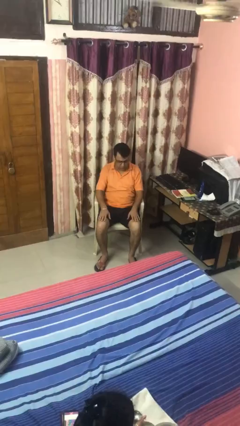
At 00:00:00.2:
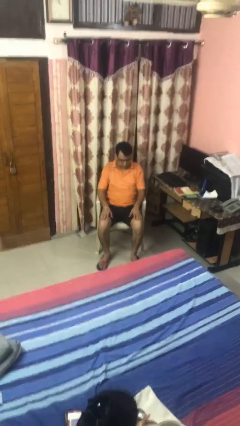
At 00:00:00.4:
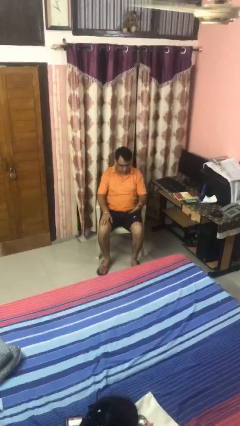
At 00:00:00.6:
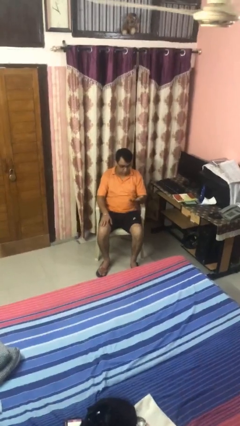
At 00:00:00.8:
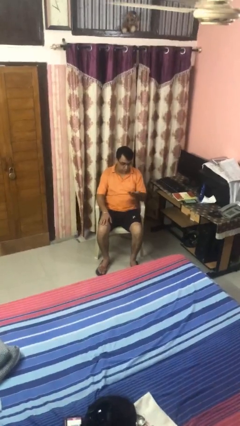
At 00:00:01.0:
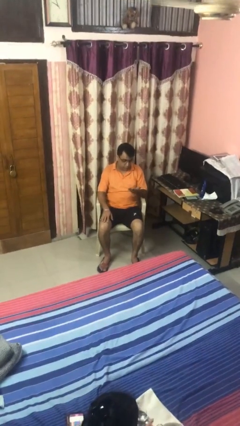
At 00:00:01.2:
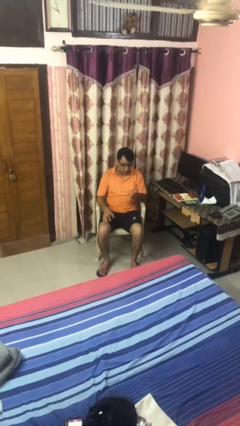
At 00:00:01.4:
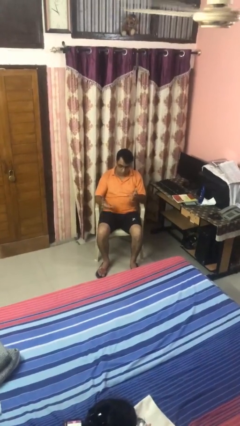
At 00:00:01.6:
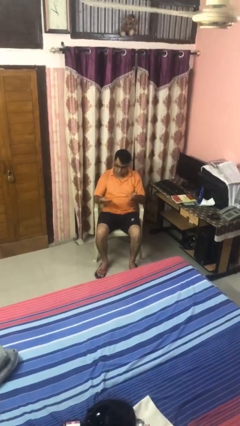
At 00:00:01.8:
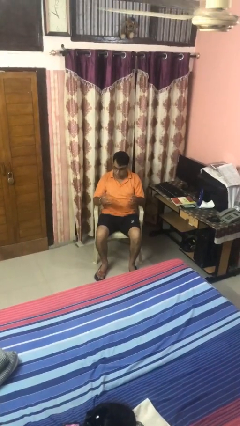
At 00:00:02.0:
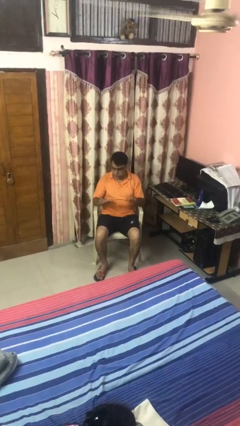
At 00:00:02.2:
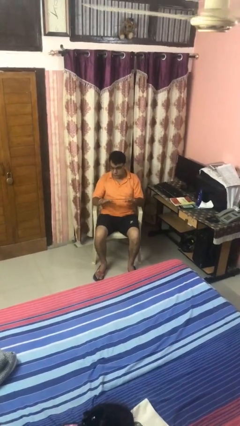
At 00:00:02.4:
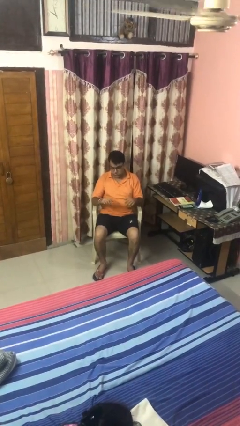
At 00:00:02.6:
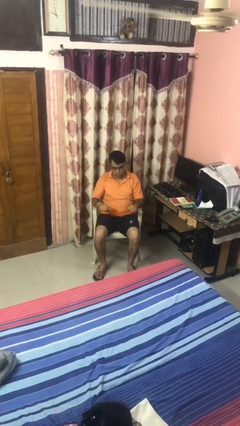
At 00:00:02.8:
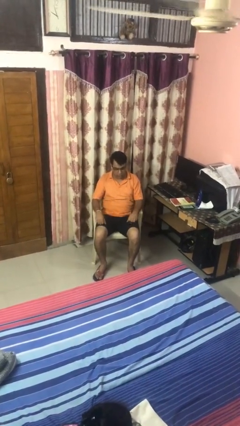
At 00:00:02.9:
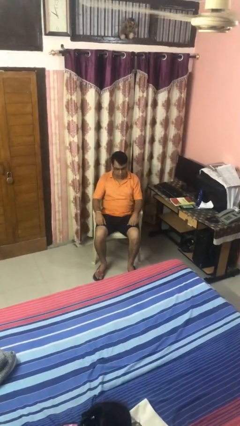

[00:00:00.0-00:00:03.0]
person looks at hands in lap

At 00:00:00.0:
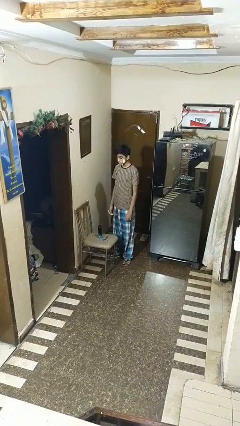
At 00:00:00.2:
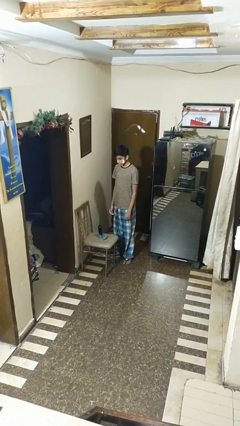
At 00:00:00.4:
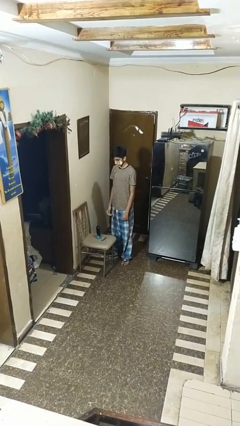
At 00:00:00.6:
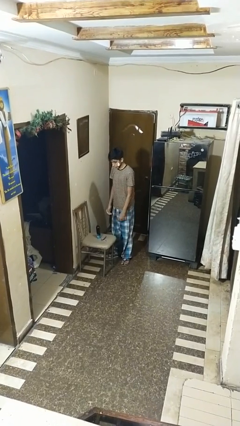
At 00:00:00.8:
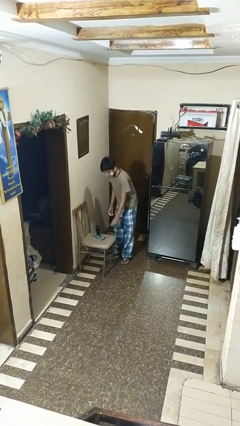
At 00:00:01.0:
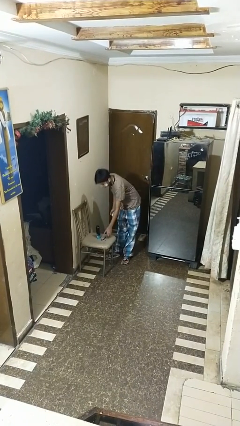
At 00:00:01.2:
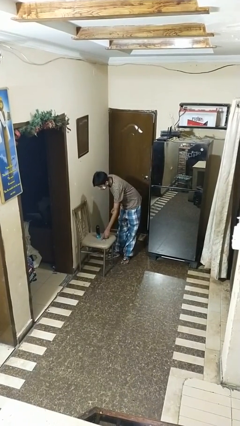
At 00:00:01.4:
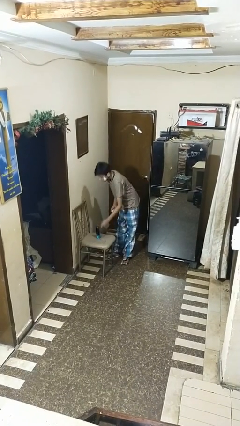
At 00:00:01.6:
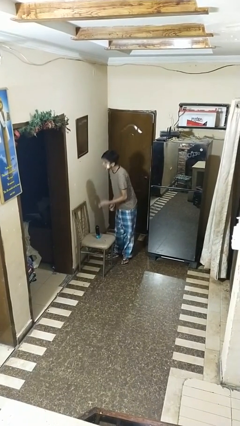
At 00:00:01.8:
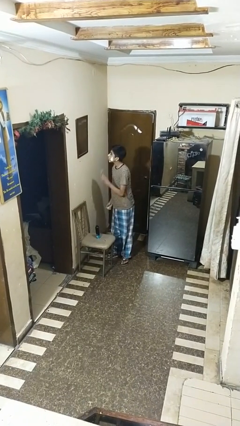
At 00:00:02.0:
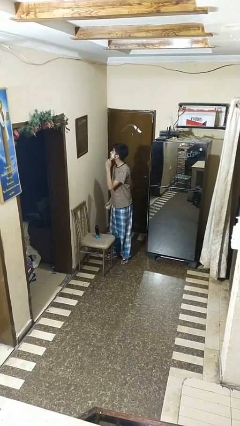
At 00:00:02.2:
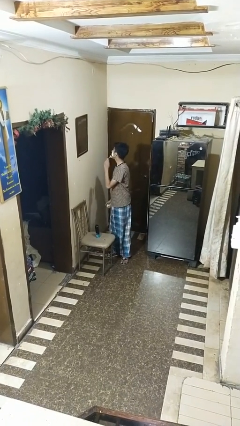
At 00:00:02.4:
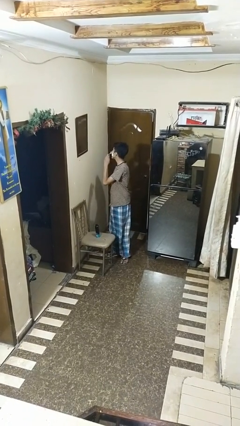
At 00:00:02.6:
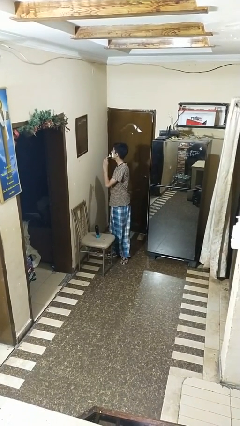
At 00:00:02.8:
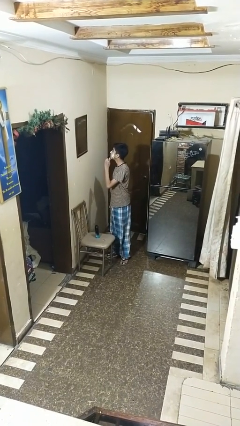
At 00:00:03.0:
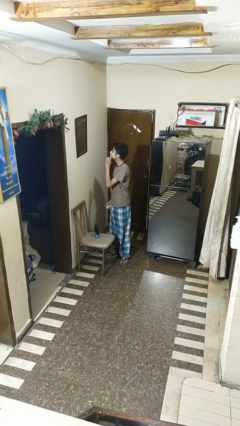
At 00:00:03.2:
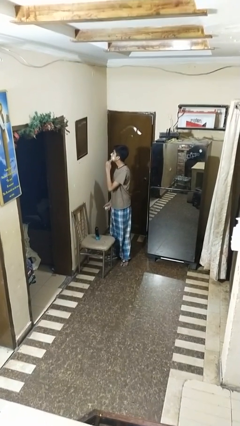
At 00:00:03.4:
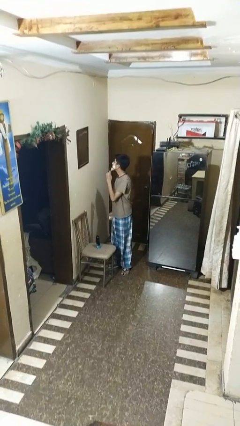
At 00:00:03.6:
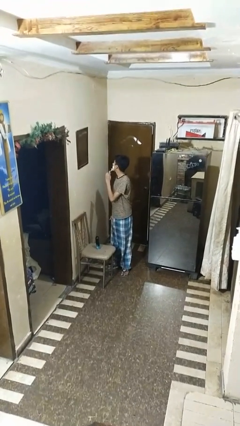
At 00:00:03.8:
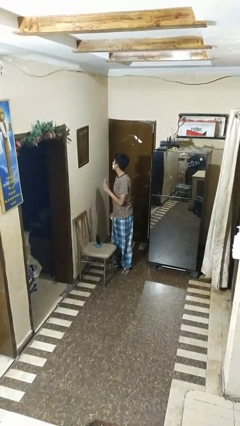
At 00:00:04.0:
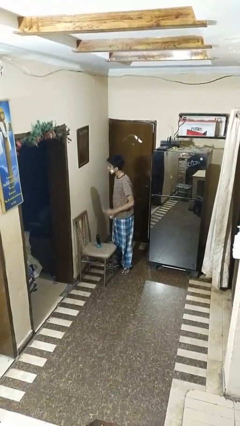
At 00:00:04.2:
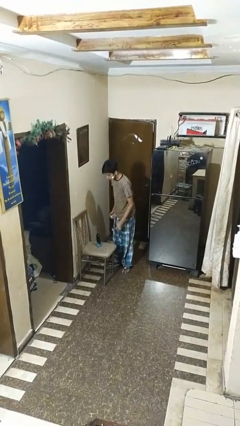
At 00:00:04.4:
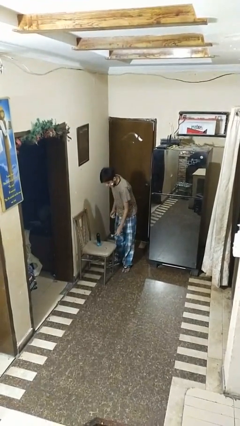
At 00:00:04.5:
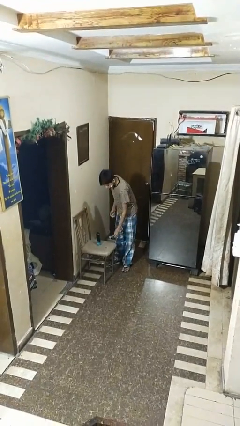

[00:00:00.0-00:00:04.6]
person shaves face

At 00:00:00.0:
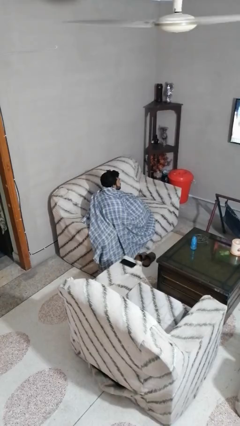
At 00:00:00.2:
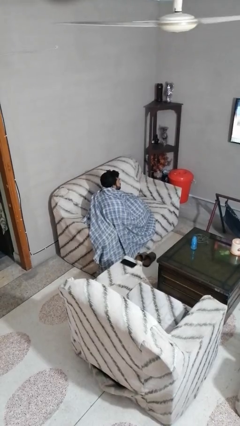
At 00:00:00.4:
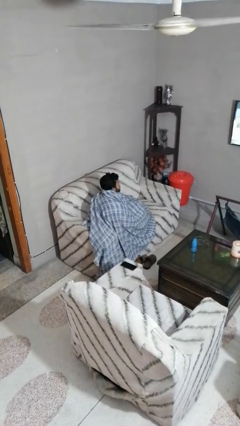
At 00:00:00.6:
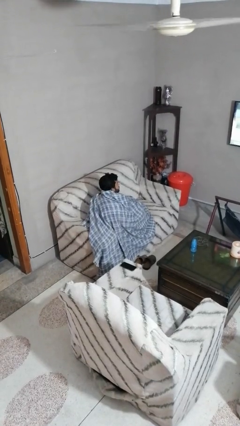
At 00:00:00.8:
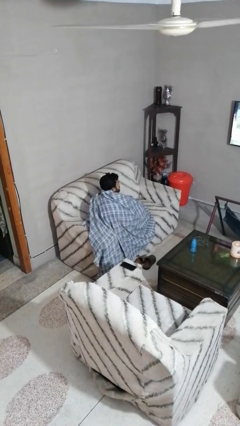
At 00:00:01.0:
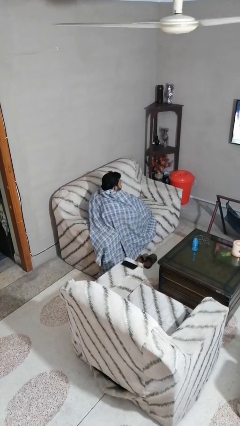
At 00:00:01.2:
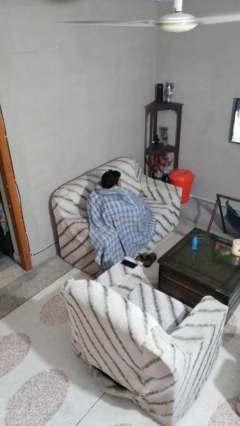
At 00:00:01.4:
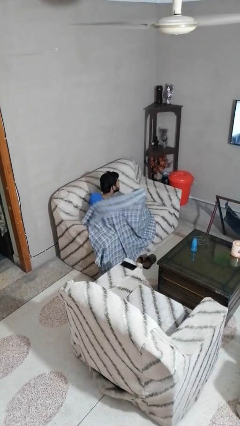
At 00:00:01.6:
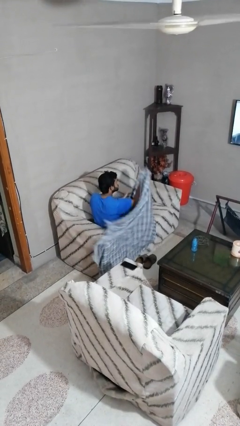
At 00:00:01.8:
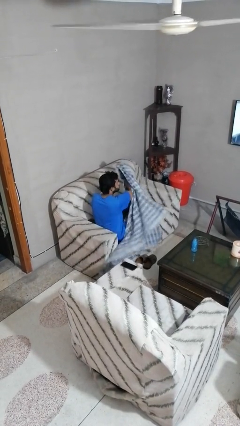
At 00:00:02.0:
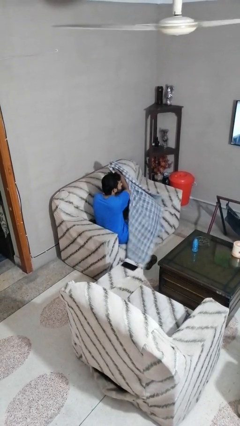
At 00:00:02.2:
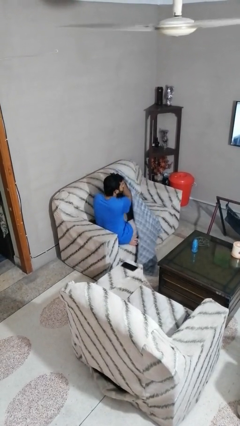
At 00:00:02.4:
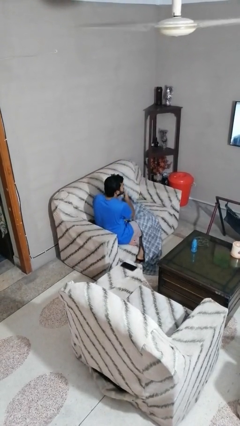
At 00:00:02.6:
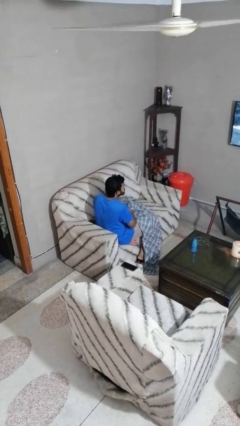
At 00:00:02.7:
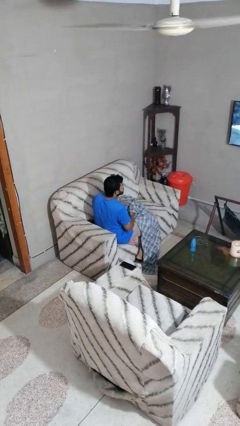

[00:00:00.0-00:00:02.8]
person uncovers with blanket

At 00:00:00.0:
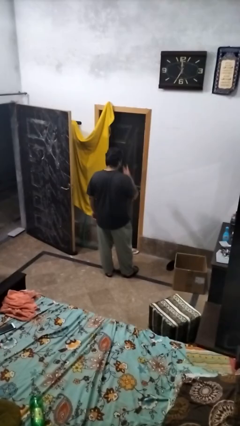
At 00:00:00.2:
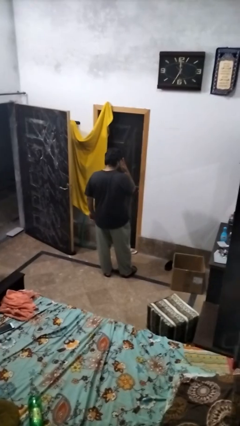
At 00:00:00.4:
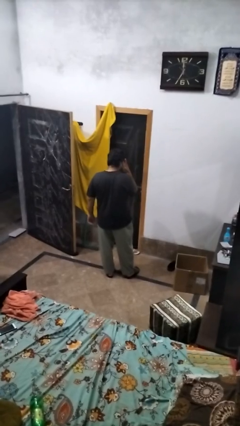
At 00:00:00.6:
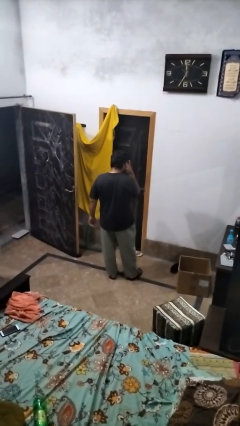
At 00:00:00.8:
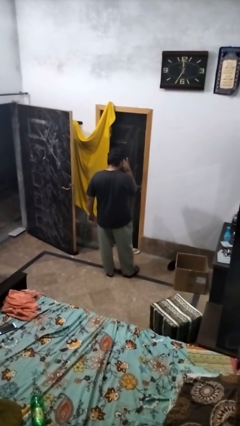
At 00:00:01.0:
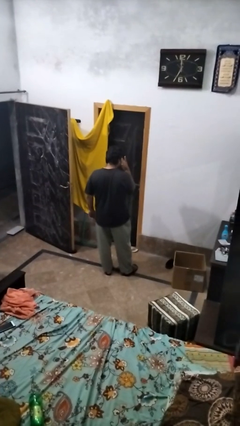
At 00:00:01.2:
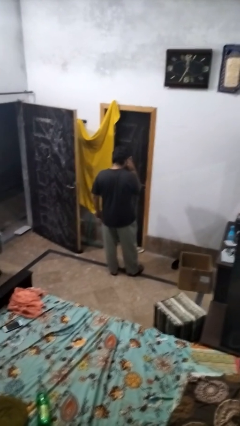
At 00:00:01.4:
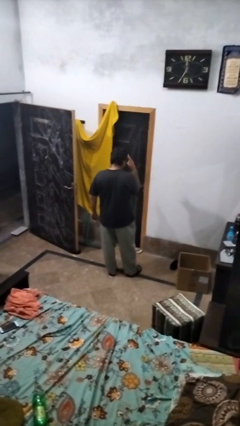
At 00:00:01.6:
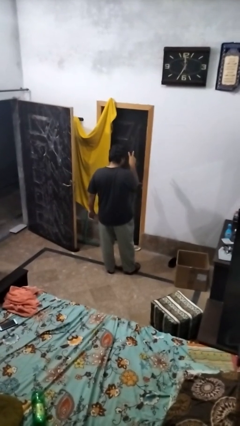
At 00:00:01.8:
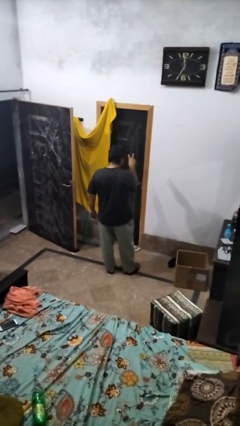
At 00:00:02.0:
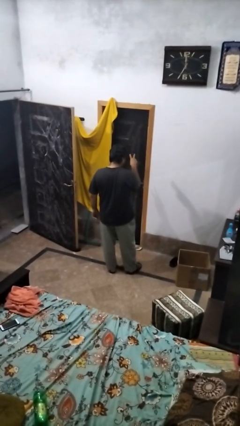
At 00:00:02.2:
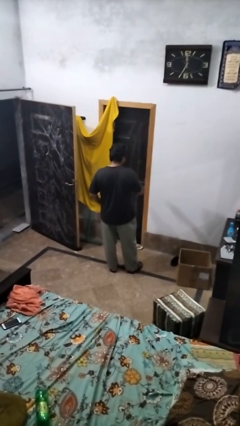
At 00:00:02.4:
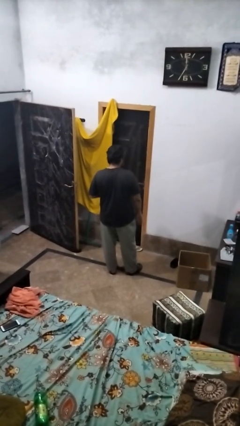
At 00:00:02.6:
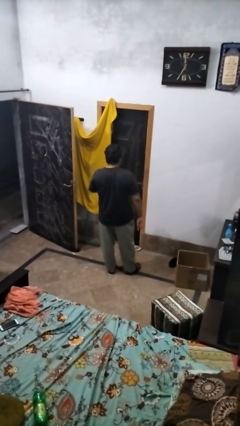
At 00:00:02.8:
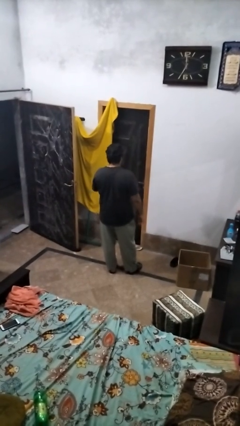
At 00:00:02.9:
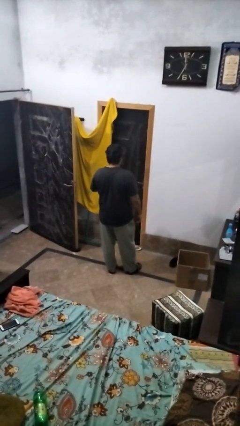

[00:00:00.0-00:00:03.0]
person gestures watch closely

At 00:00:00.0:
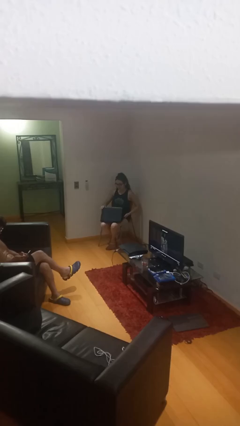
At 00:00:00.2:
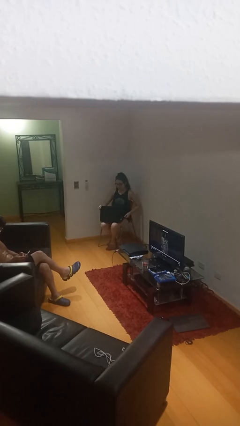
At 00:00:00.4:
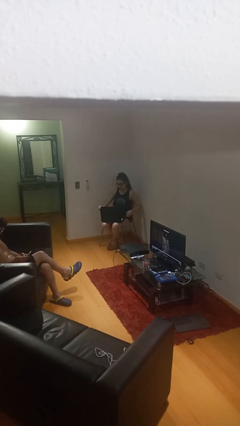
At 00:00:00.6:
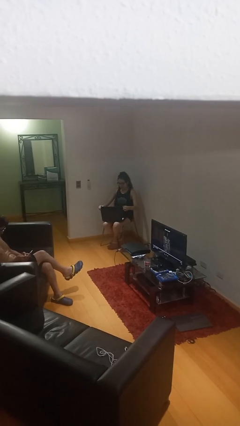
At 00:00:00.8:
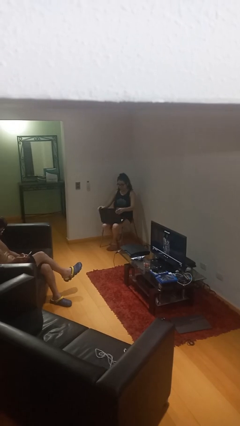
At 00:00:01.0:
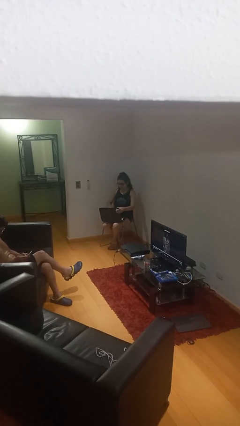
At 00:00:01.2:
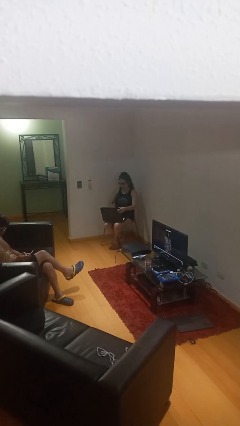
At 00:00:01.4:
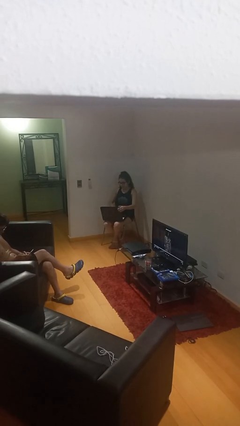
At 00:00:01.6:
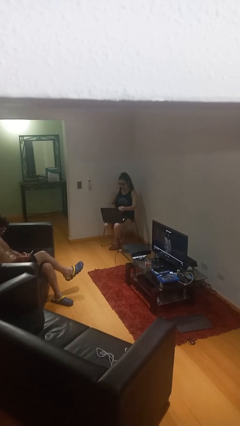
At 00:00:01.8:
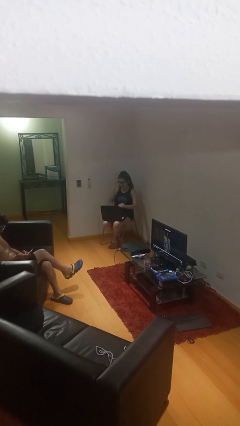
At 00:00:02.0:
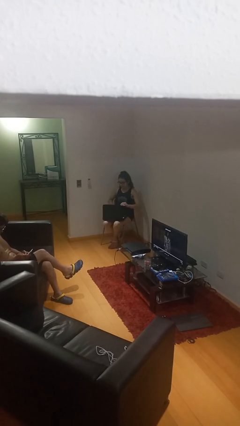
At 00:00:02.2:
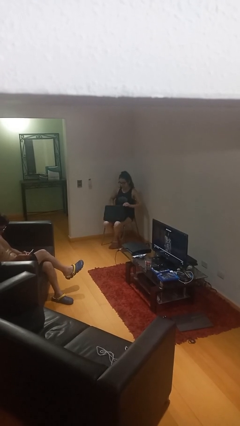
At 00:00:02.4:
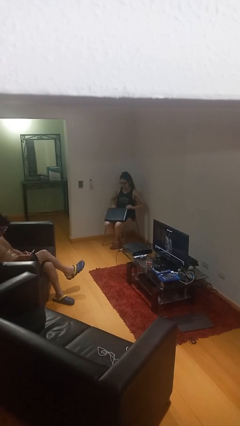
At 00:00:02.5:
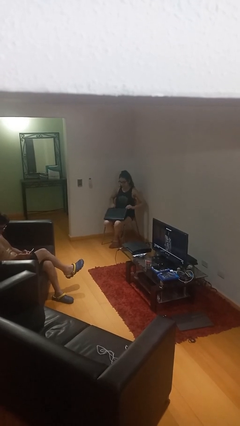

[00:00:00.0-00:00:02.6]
person interacts with laptop

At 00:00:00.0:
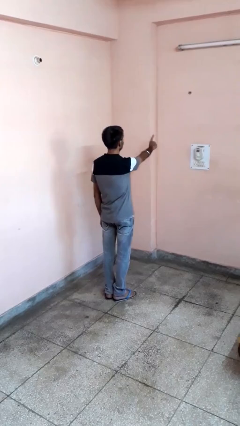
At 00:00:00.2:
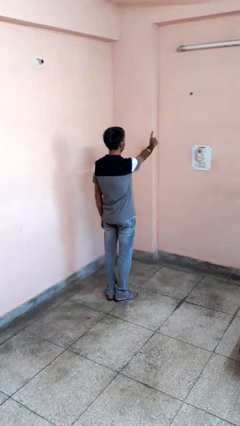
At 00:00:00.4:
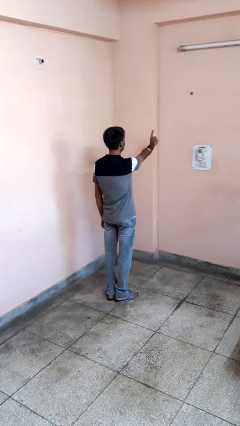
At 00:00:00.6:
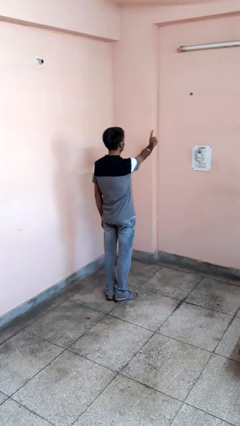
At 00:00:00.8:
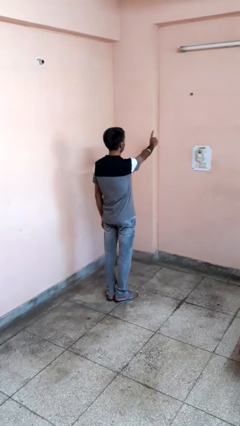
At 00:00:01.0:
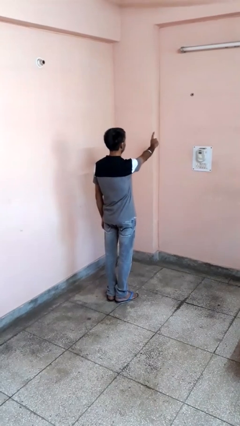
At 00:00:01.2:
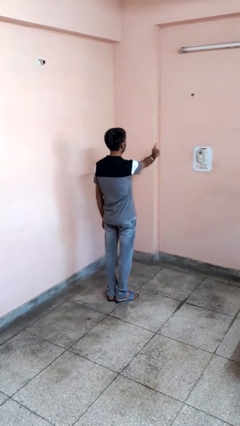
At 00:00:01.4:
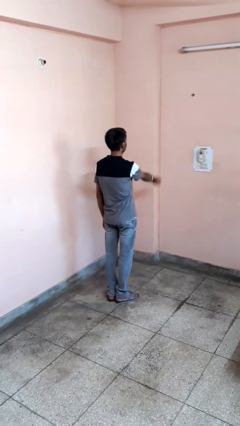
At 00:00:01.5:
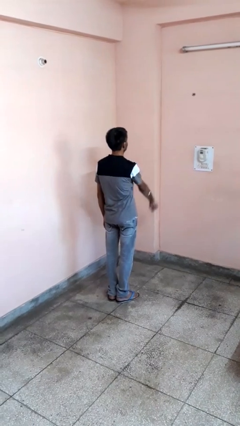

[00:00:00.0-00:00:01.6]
person gestures number one
